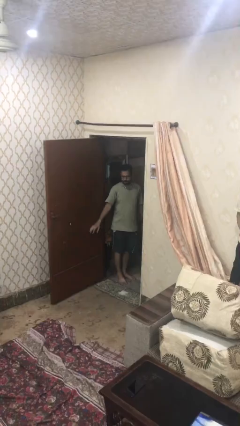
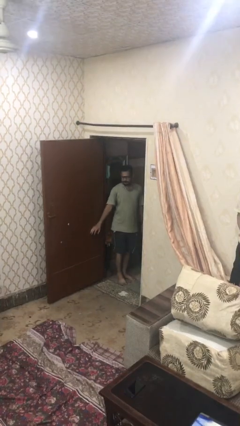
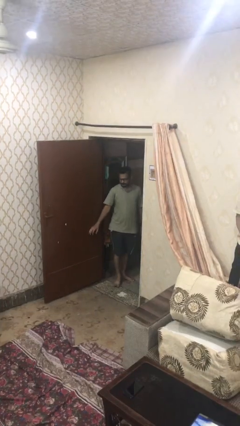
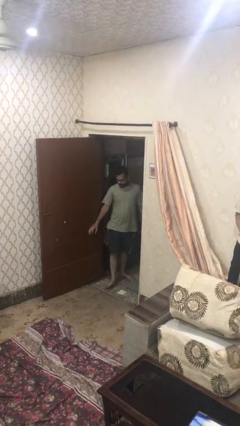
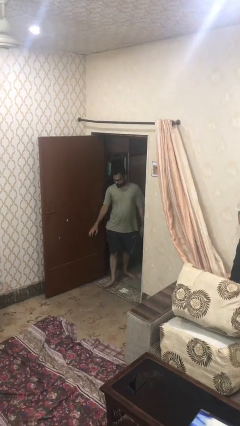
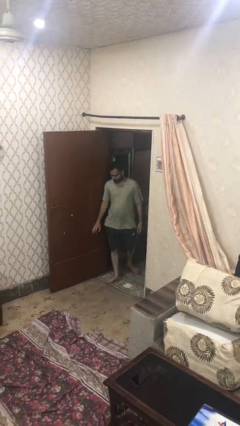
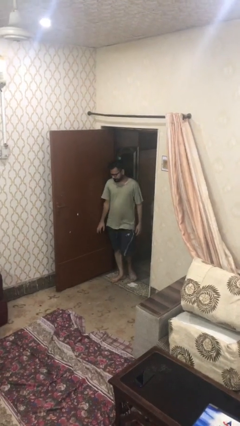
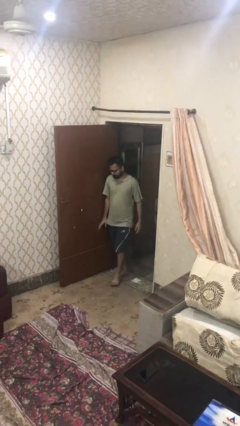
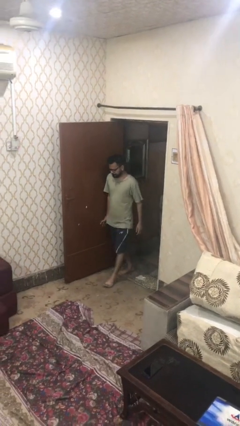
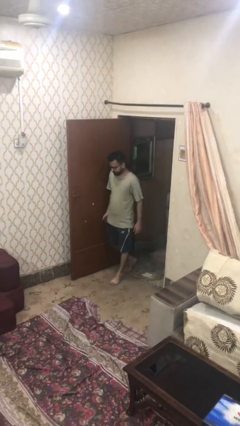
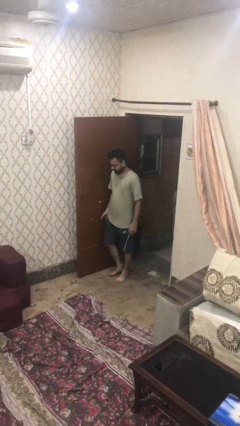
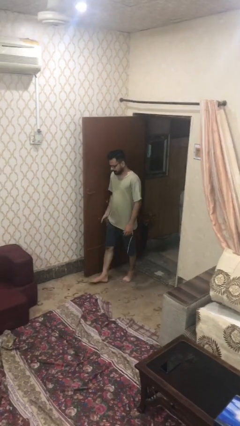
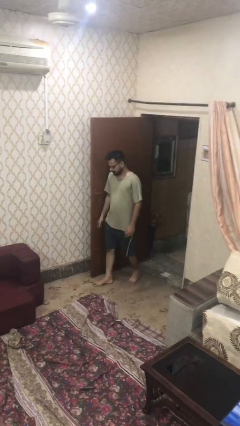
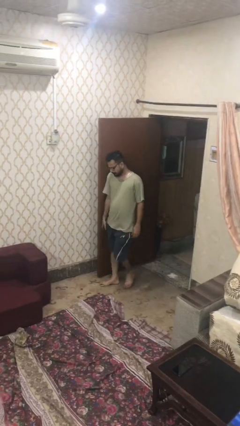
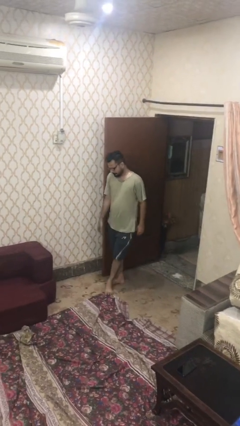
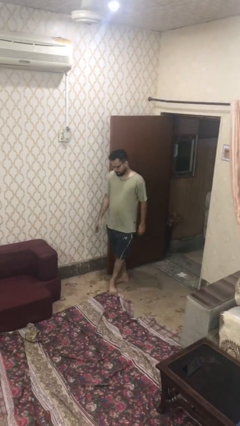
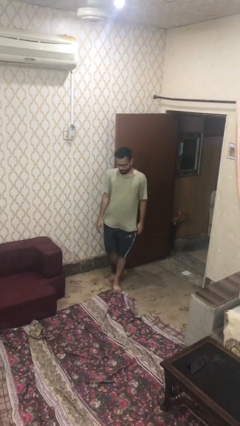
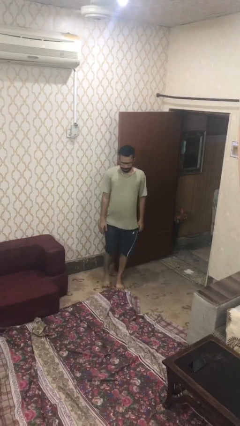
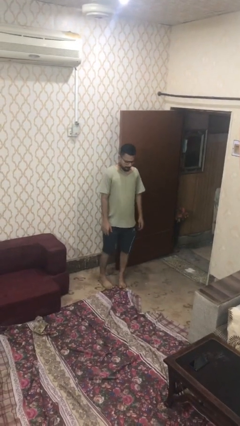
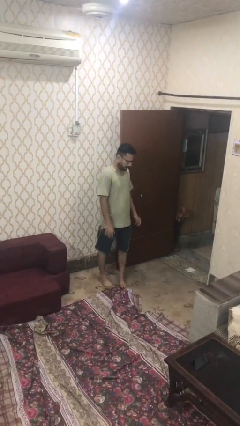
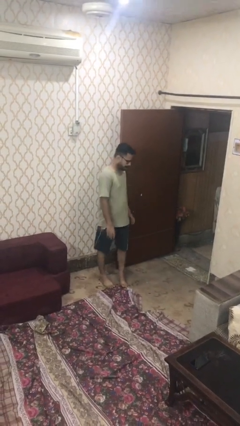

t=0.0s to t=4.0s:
person enters scene through structure

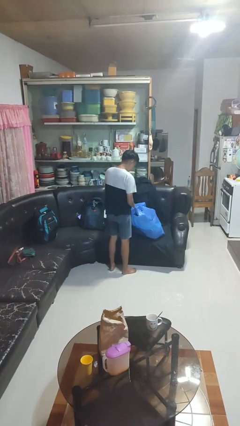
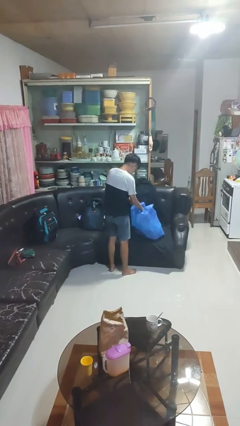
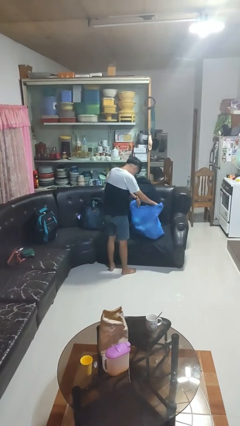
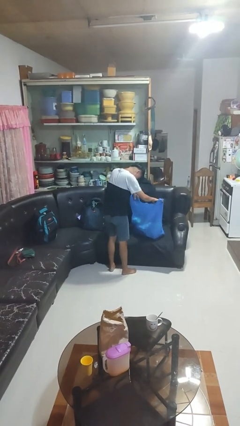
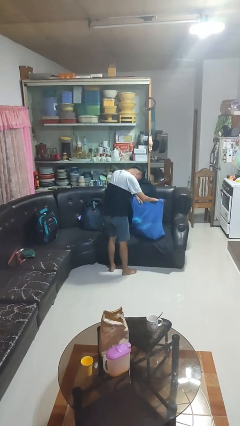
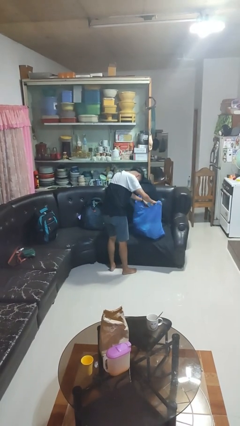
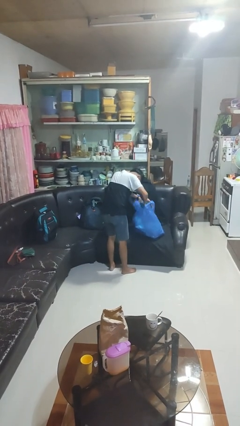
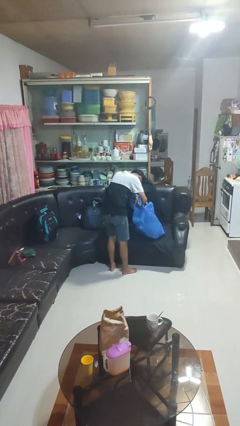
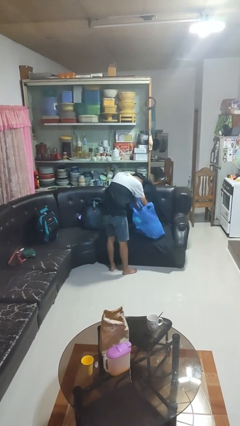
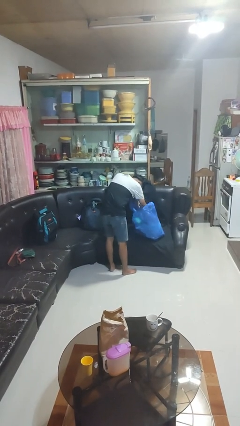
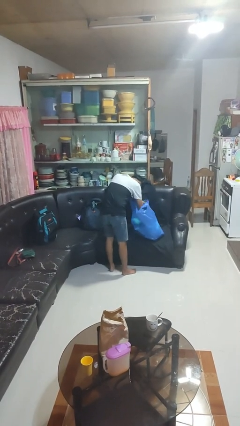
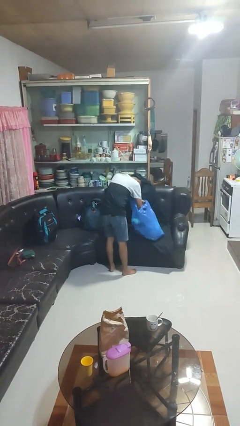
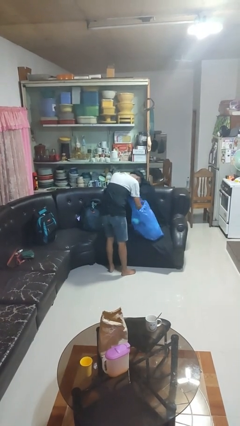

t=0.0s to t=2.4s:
person searches in bag

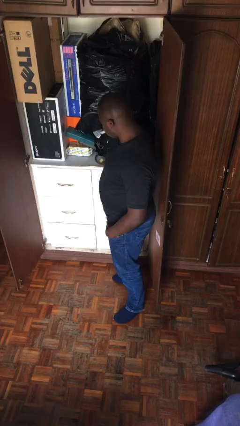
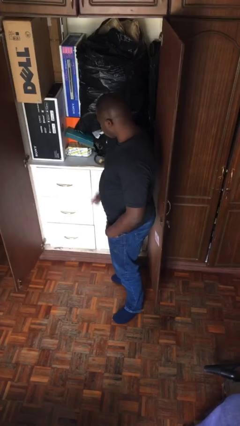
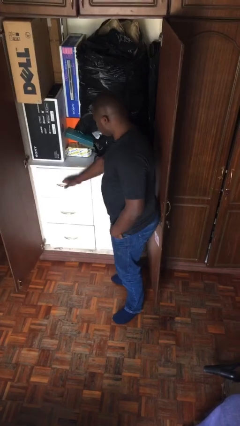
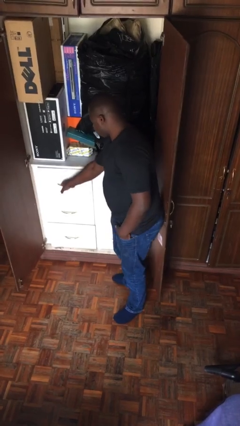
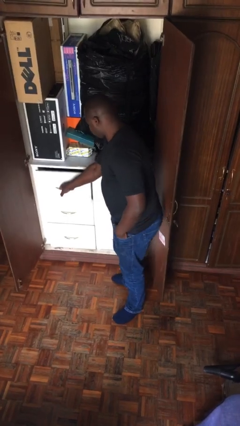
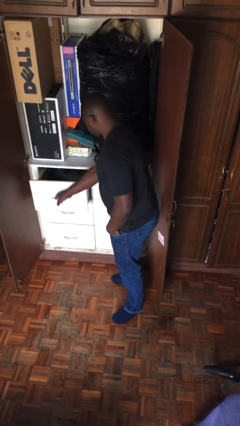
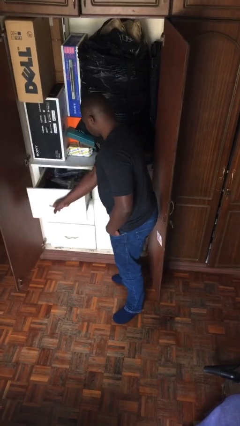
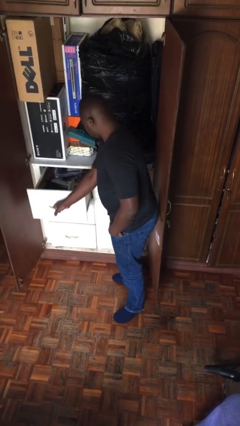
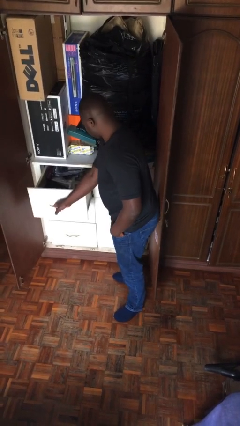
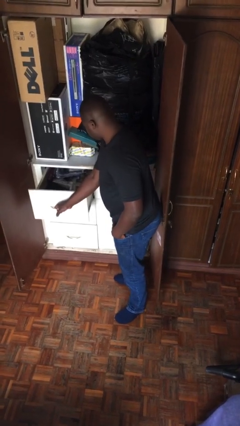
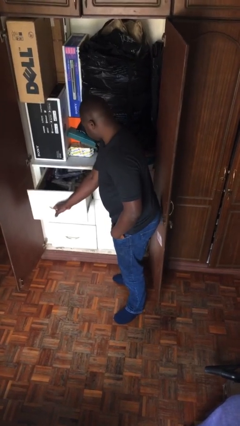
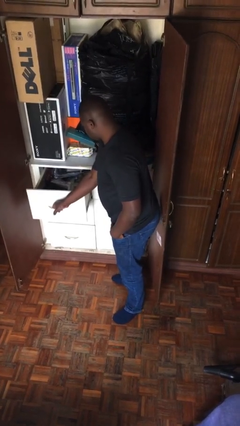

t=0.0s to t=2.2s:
person opens dresser drawer

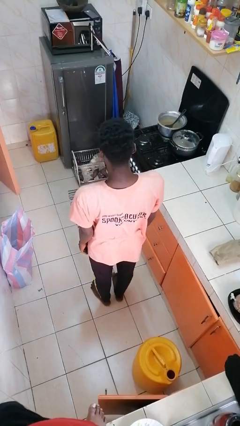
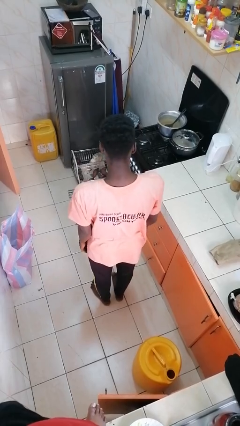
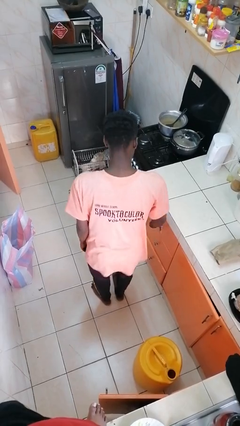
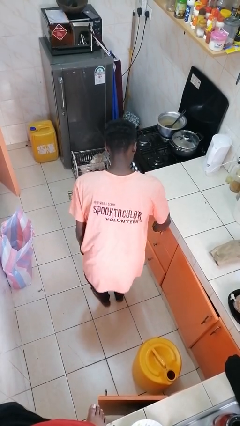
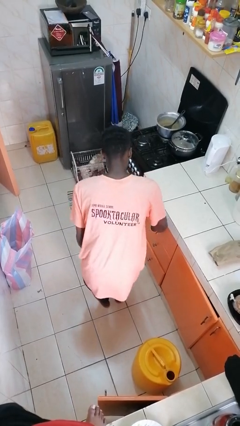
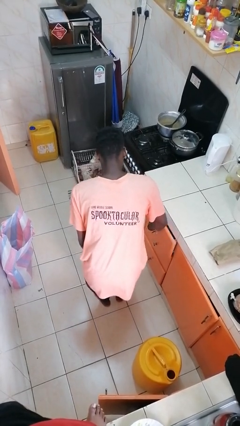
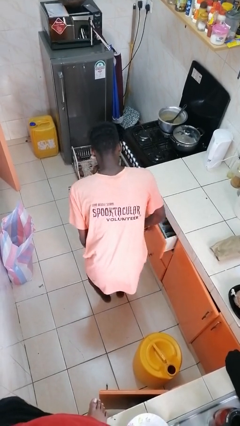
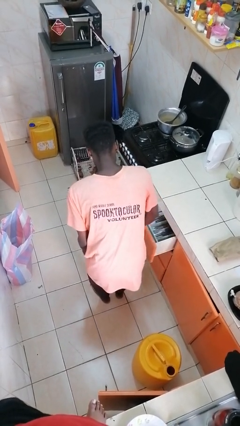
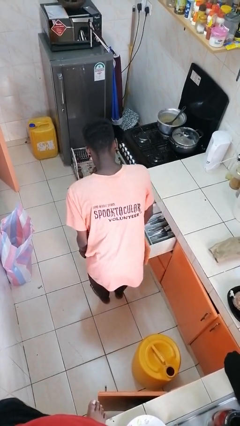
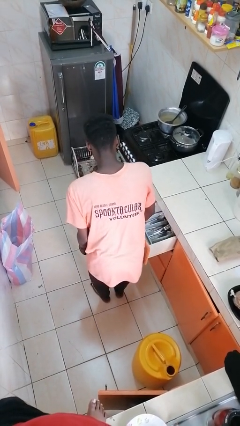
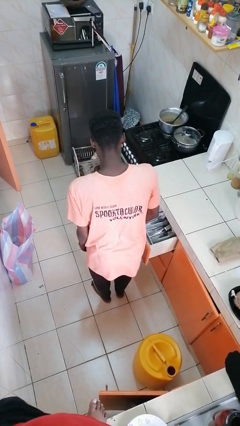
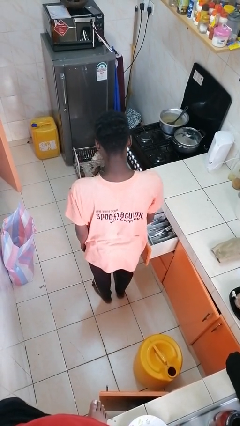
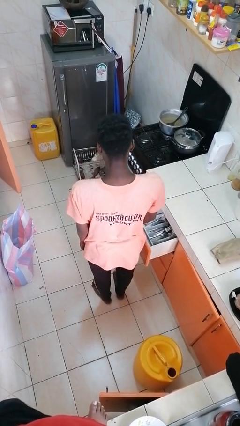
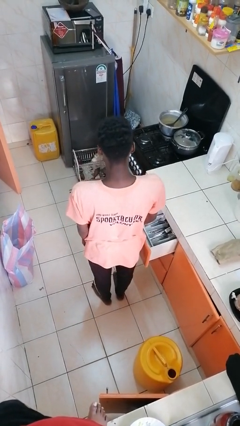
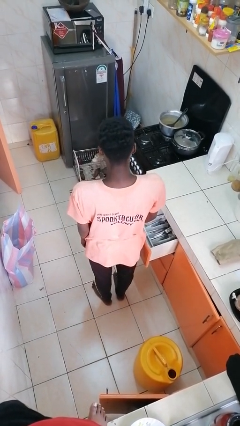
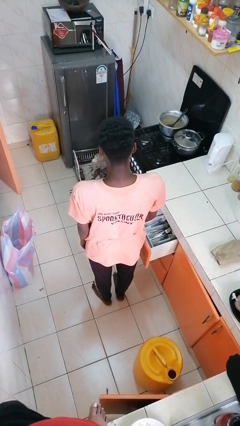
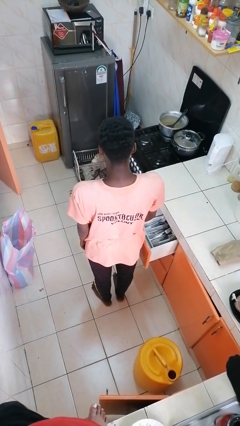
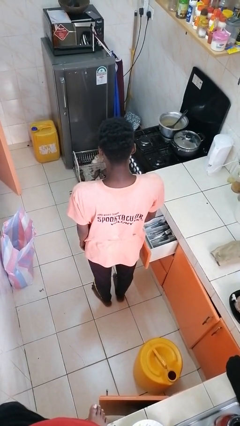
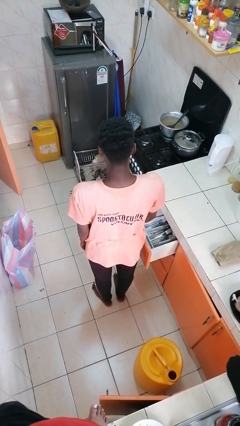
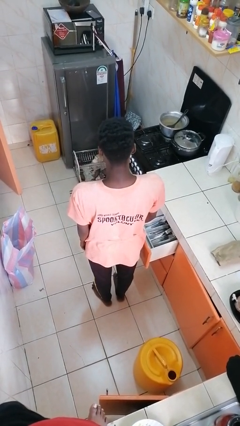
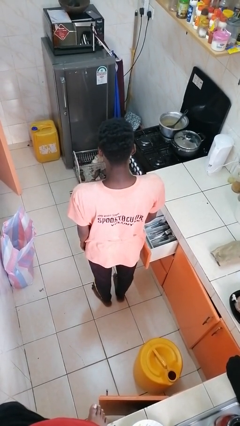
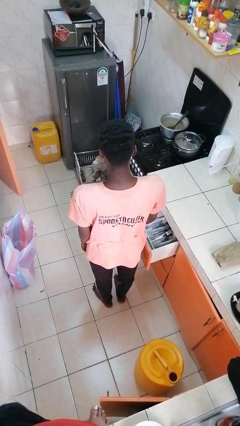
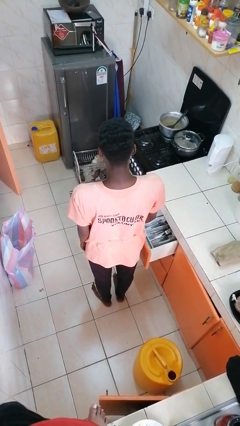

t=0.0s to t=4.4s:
person opens kitchen drawer

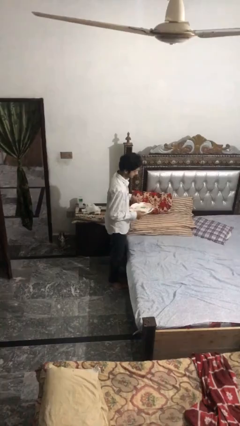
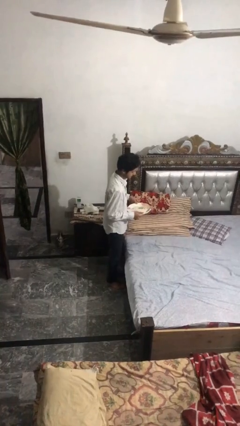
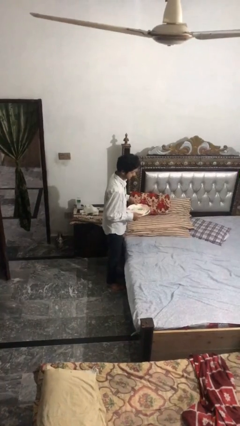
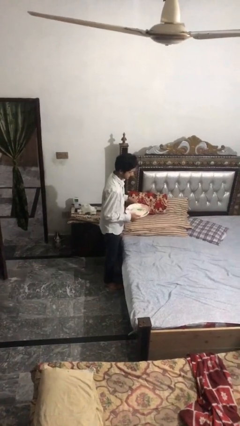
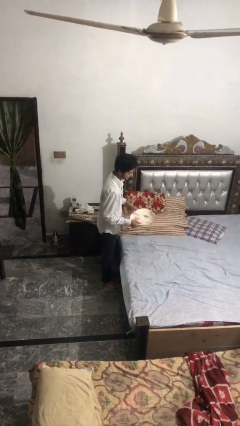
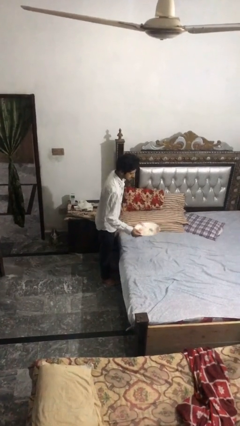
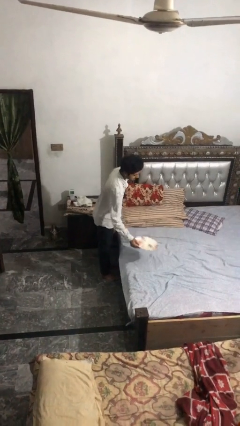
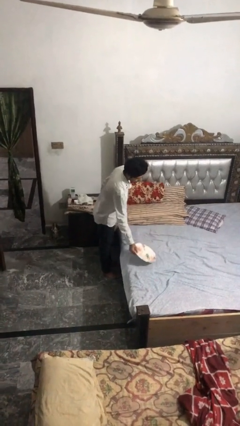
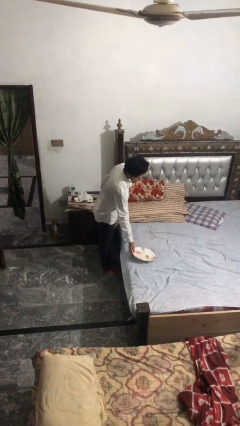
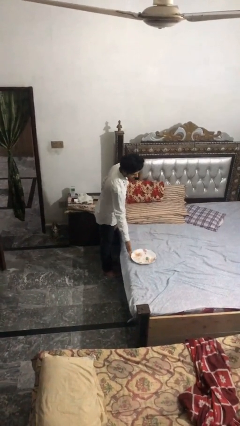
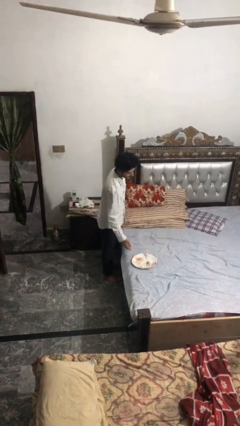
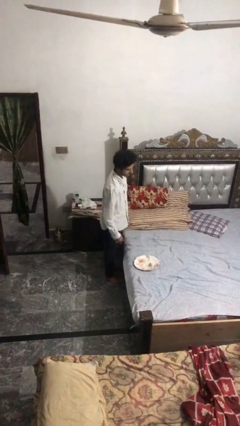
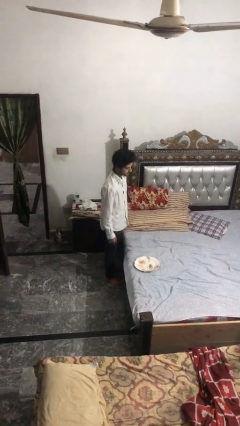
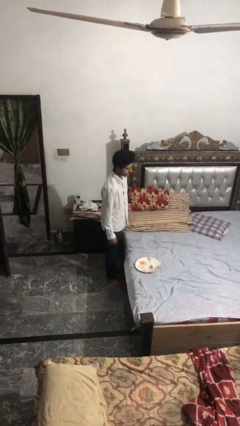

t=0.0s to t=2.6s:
person puts down object on bed

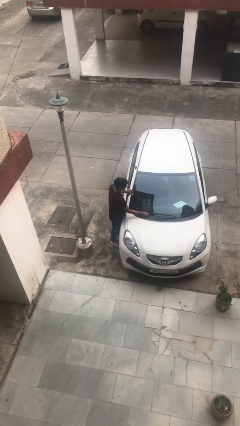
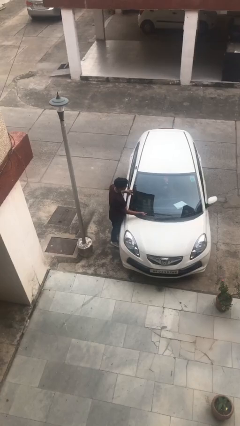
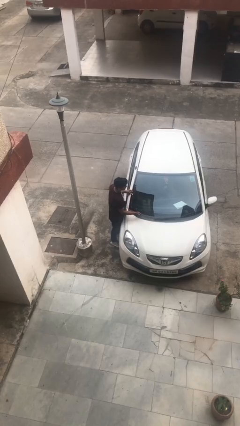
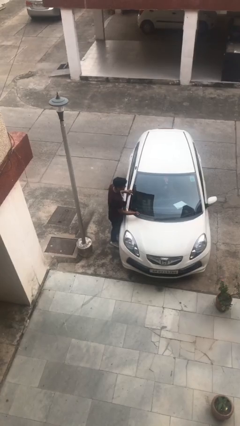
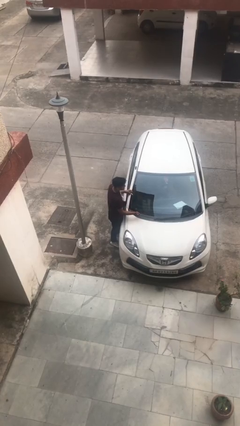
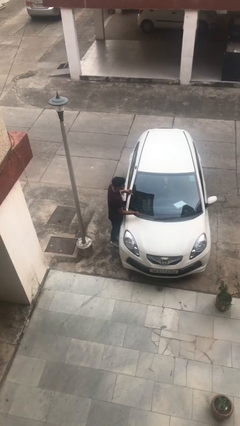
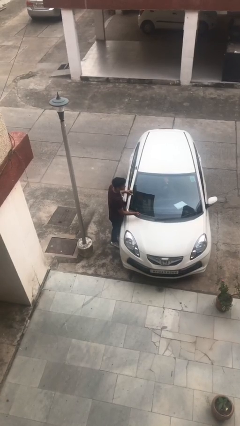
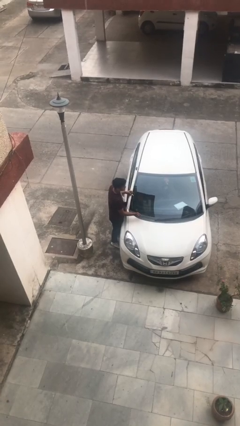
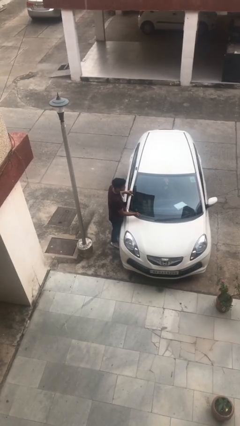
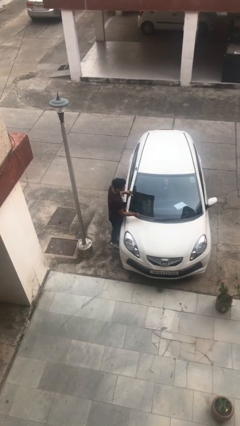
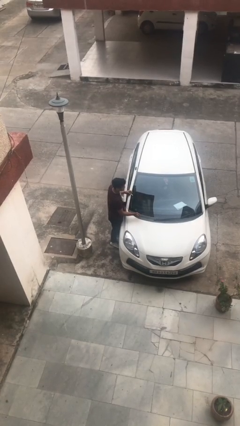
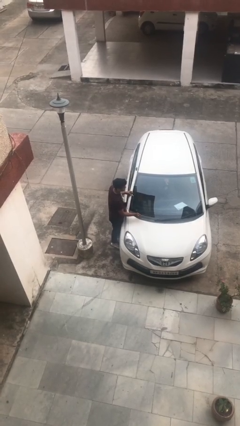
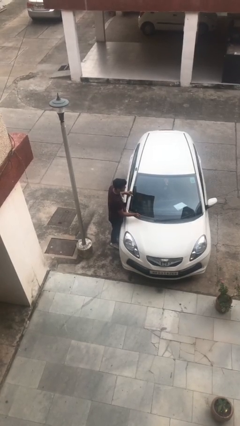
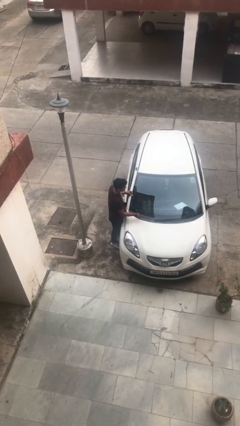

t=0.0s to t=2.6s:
person flips up car wipers
